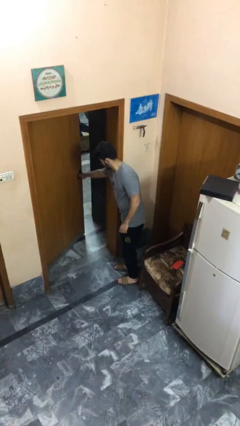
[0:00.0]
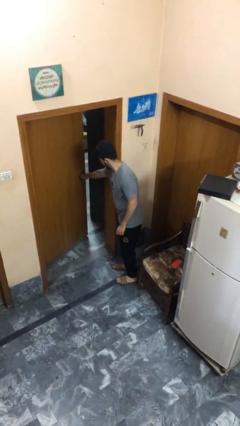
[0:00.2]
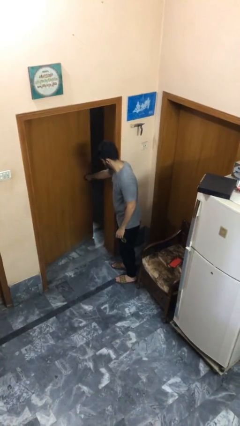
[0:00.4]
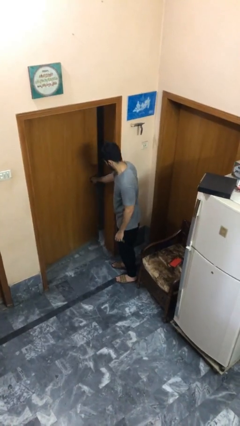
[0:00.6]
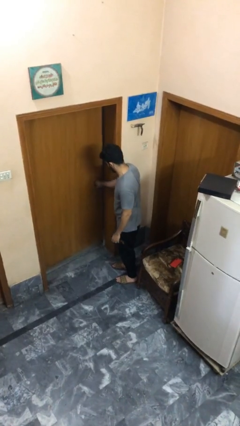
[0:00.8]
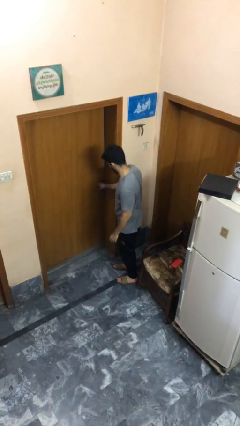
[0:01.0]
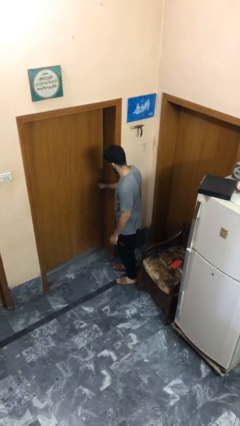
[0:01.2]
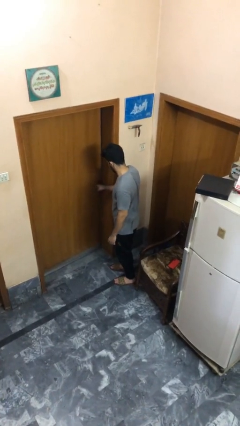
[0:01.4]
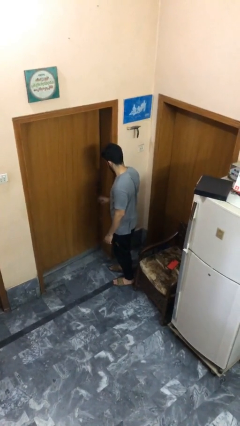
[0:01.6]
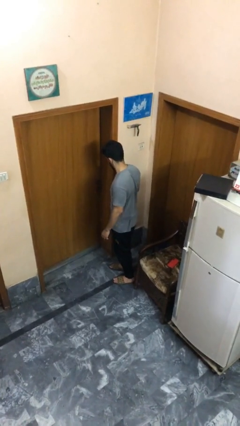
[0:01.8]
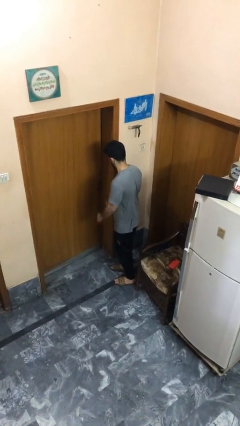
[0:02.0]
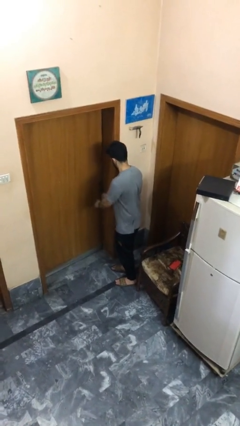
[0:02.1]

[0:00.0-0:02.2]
person closes facility door

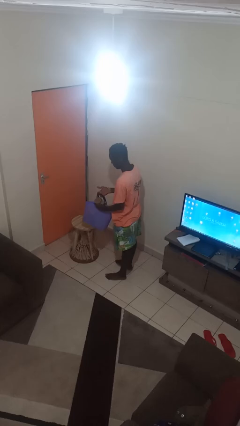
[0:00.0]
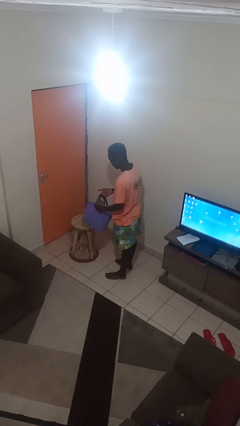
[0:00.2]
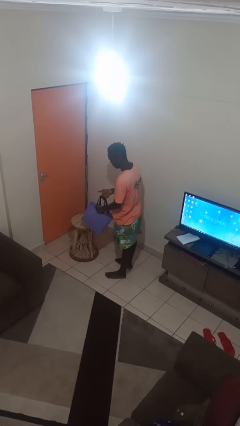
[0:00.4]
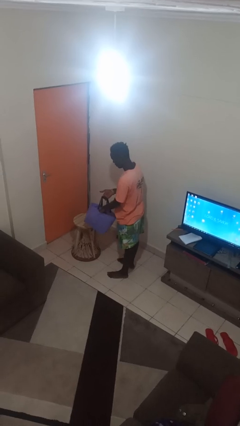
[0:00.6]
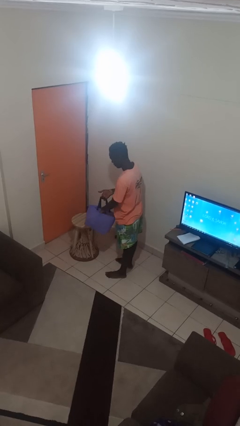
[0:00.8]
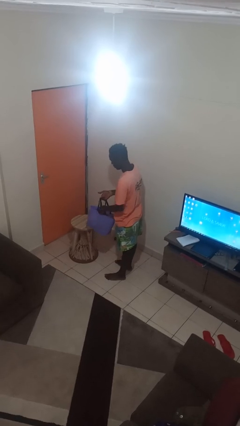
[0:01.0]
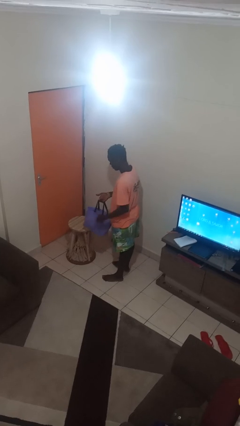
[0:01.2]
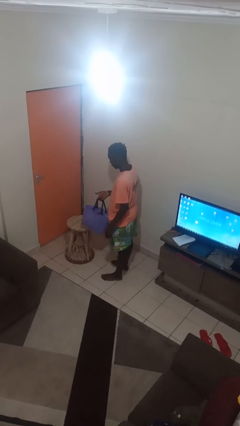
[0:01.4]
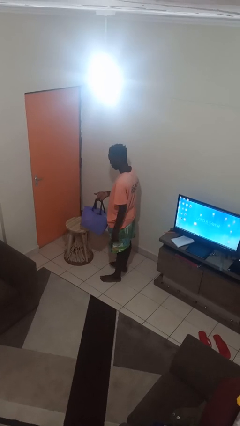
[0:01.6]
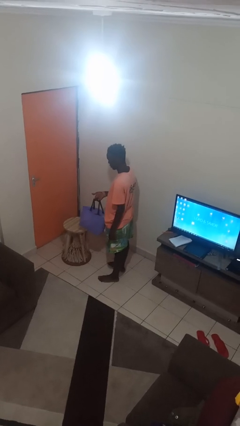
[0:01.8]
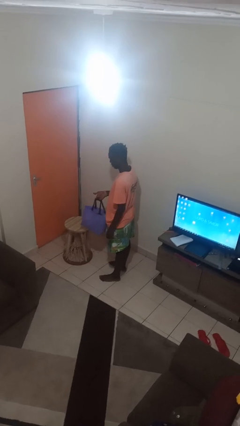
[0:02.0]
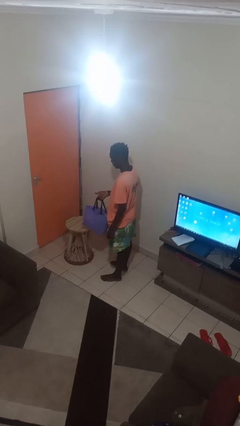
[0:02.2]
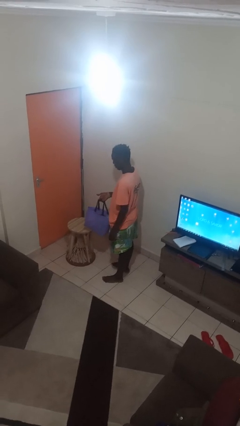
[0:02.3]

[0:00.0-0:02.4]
person puts object into bag

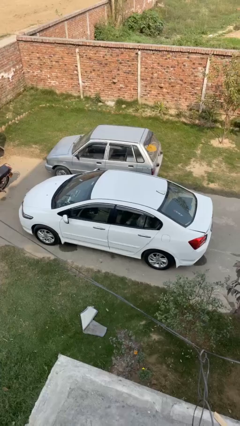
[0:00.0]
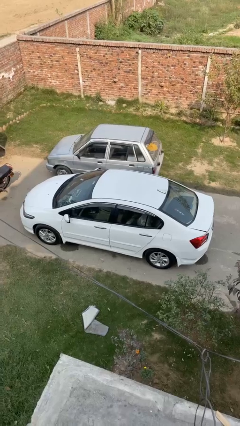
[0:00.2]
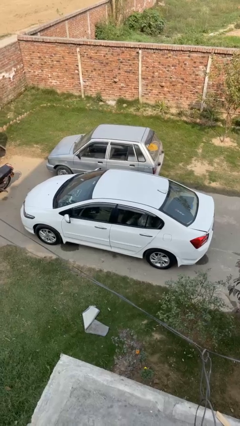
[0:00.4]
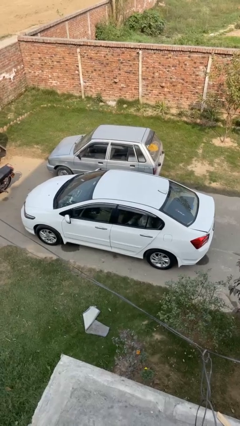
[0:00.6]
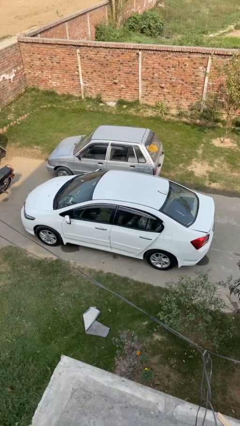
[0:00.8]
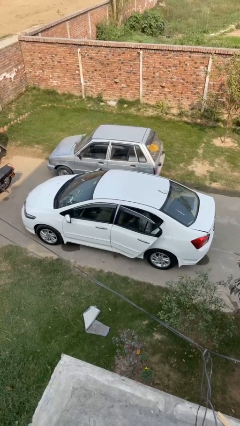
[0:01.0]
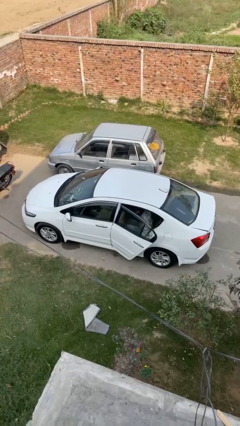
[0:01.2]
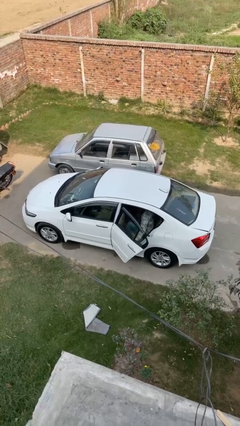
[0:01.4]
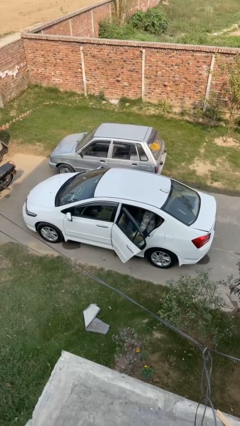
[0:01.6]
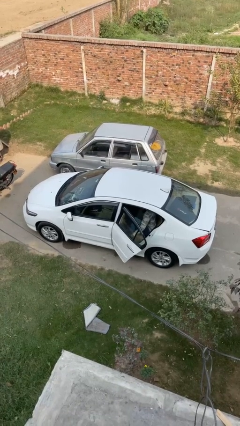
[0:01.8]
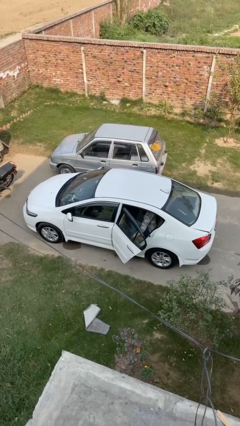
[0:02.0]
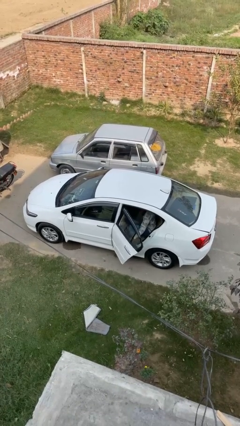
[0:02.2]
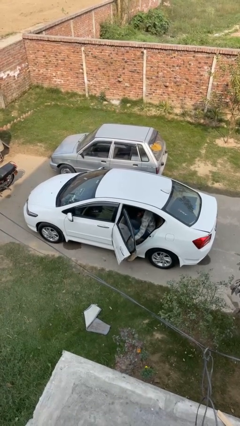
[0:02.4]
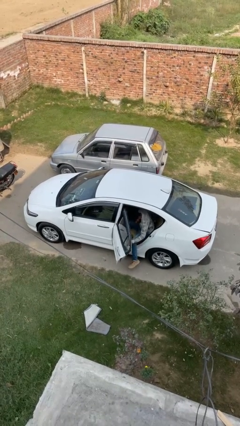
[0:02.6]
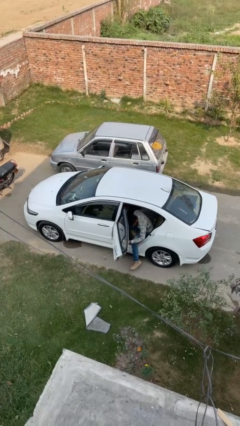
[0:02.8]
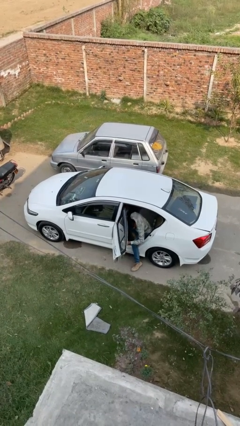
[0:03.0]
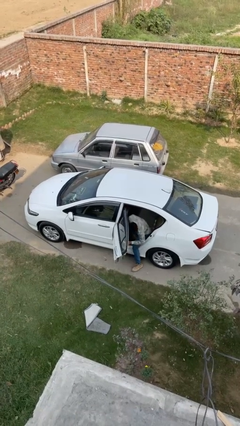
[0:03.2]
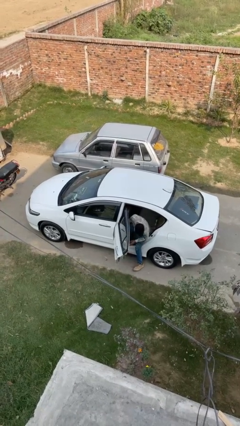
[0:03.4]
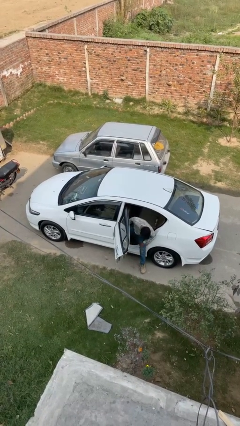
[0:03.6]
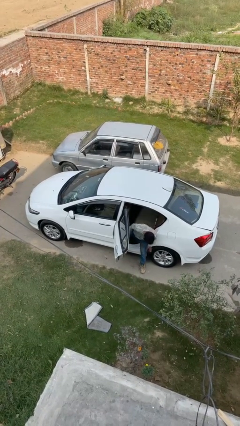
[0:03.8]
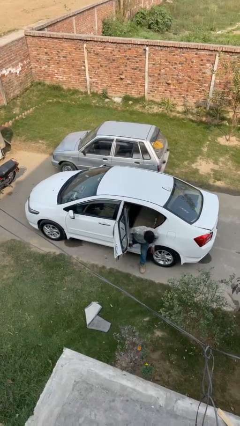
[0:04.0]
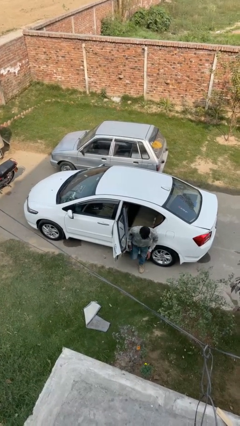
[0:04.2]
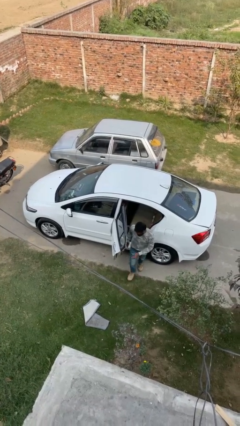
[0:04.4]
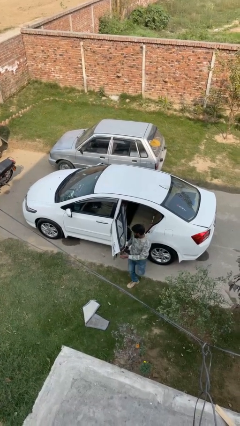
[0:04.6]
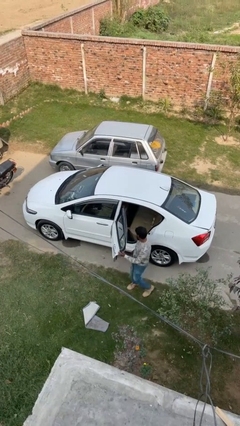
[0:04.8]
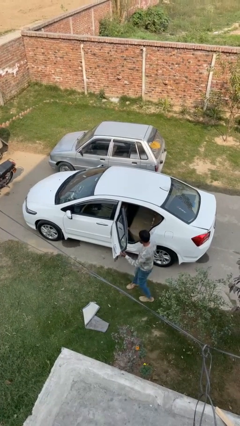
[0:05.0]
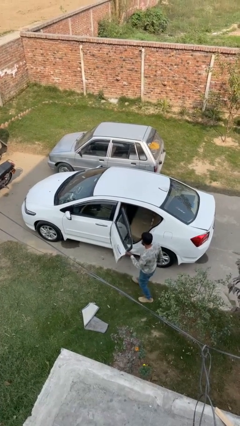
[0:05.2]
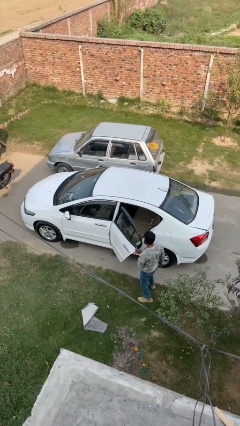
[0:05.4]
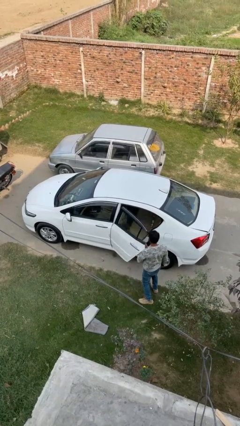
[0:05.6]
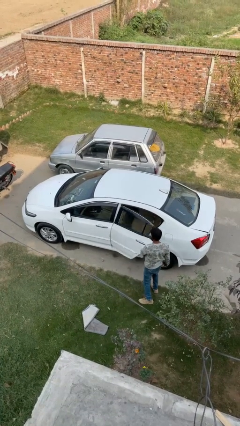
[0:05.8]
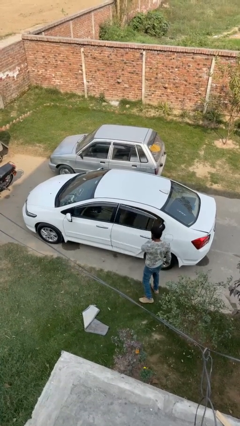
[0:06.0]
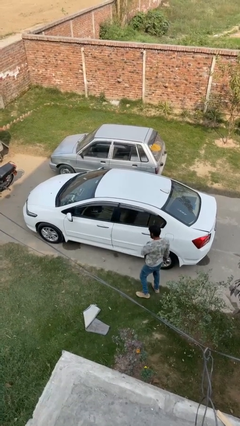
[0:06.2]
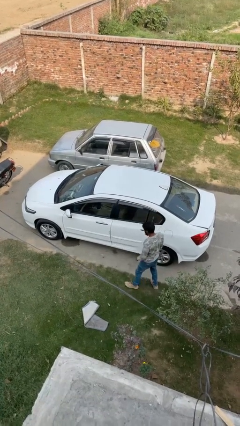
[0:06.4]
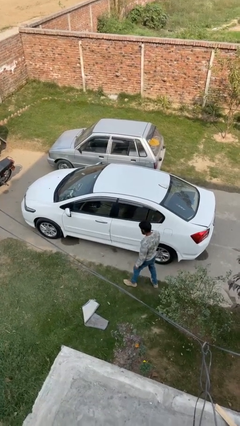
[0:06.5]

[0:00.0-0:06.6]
car drops off person

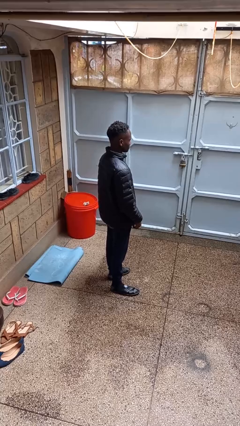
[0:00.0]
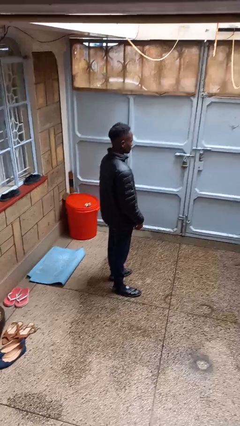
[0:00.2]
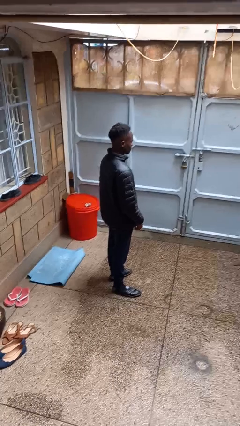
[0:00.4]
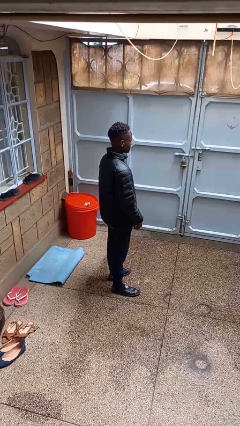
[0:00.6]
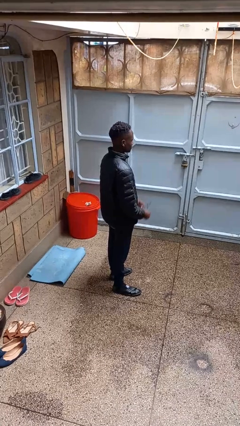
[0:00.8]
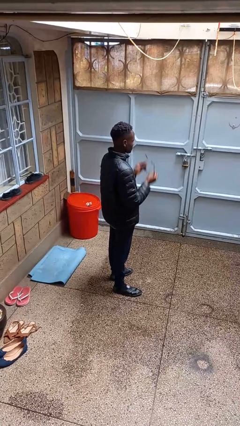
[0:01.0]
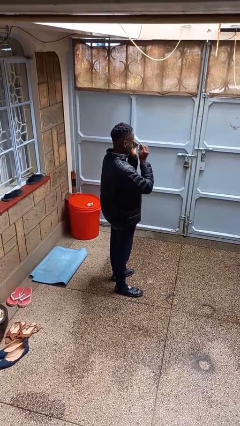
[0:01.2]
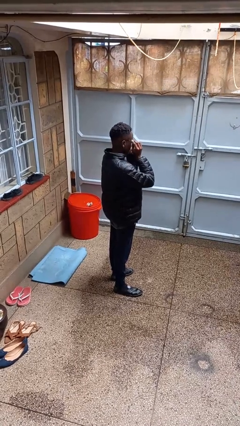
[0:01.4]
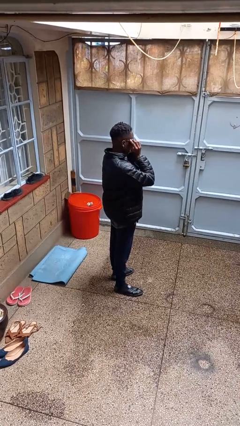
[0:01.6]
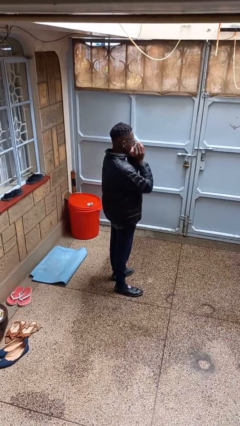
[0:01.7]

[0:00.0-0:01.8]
person puts on glasses
